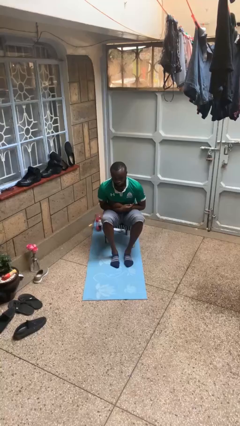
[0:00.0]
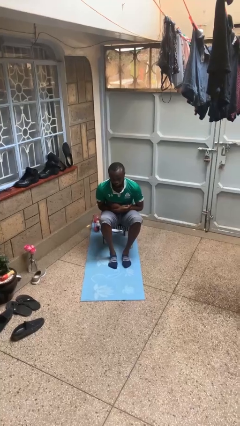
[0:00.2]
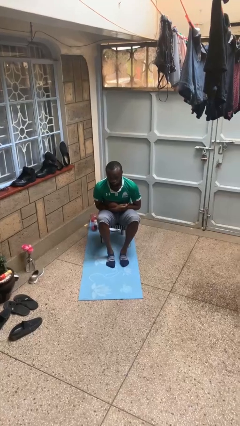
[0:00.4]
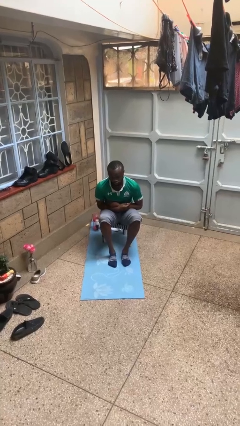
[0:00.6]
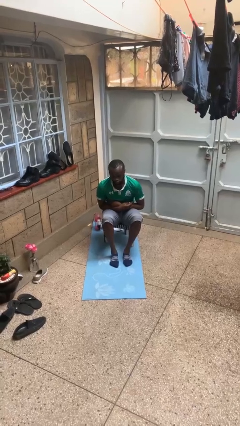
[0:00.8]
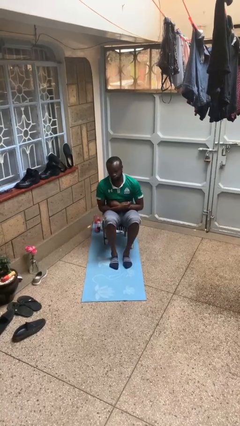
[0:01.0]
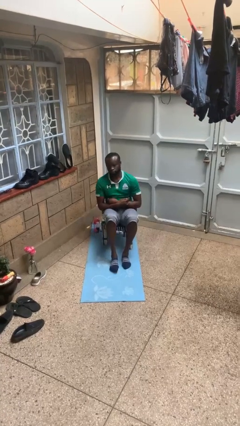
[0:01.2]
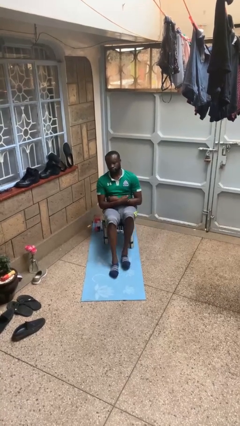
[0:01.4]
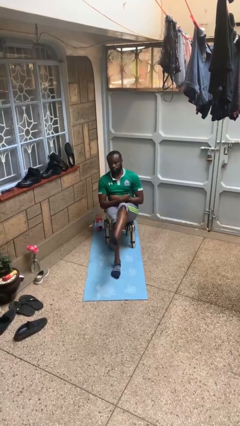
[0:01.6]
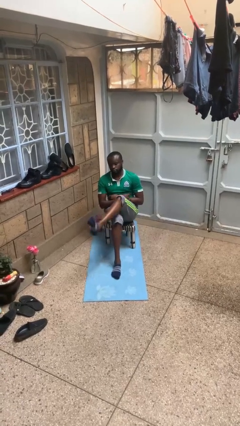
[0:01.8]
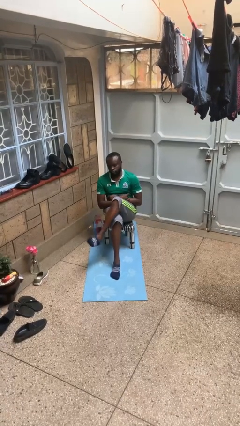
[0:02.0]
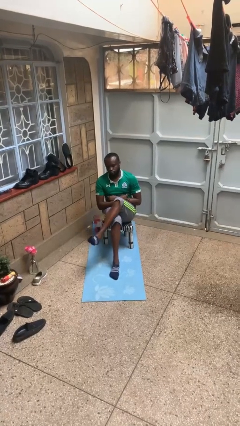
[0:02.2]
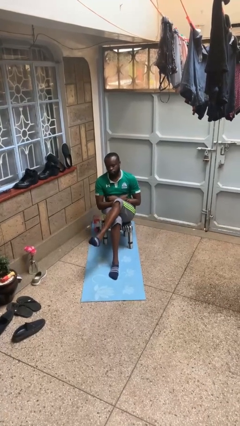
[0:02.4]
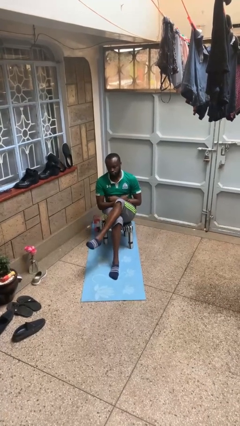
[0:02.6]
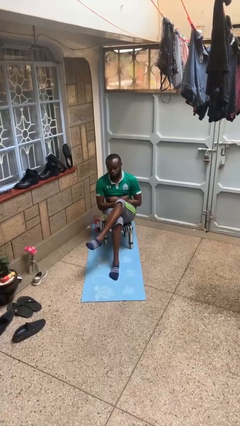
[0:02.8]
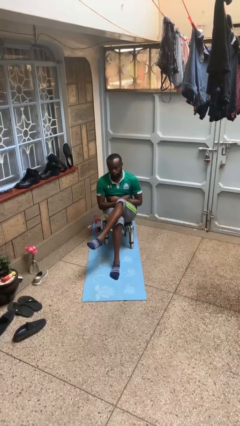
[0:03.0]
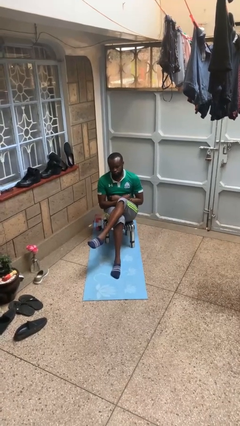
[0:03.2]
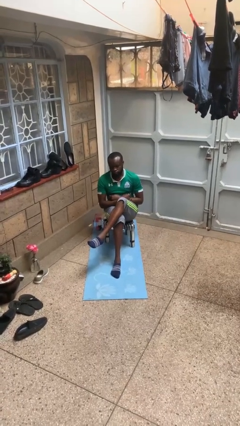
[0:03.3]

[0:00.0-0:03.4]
person crosses legs

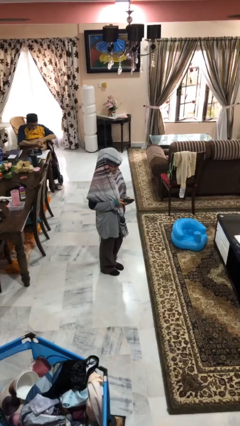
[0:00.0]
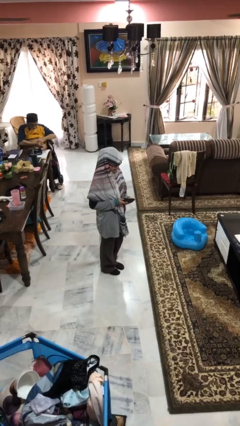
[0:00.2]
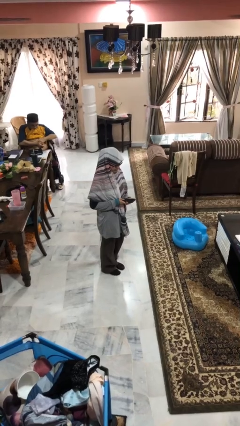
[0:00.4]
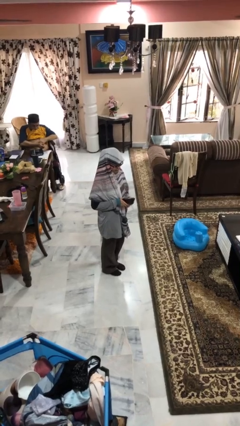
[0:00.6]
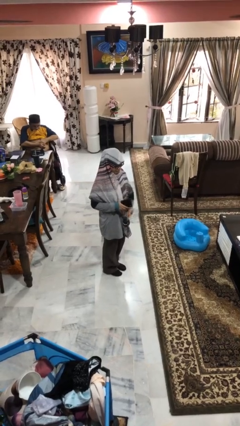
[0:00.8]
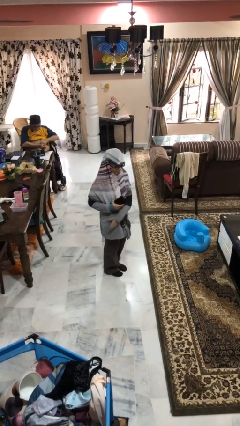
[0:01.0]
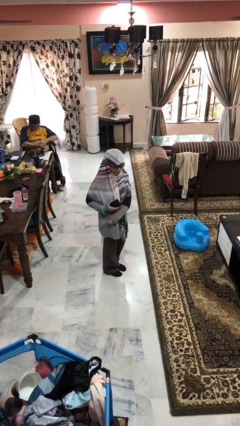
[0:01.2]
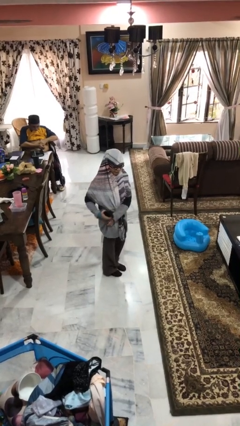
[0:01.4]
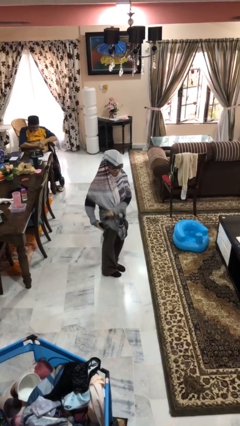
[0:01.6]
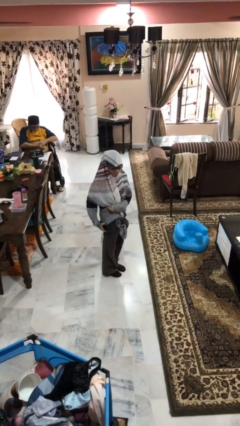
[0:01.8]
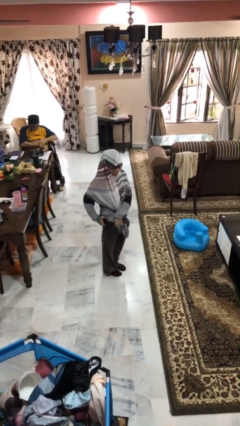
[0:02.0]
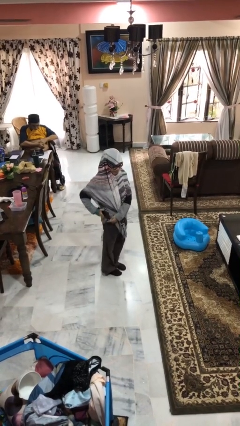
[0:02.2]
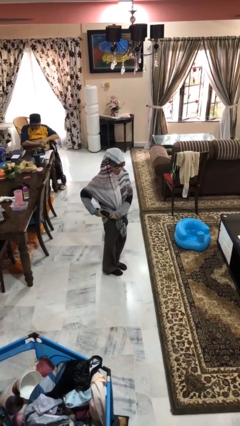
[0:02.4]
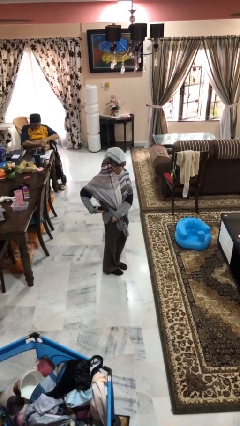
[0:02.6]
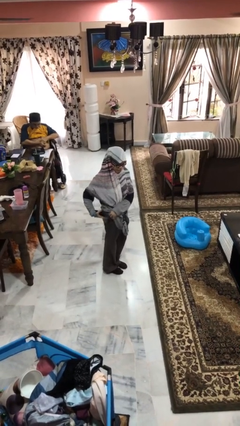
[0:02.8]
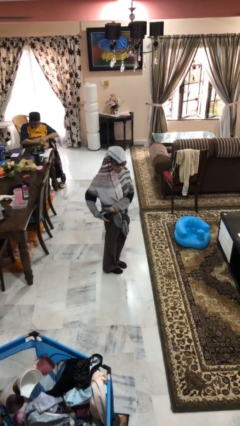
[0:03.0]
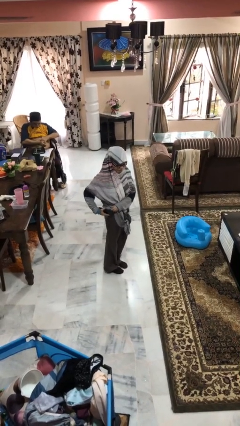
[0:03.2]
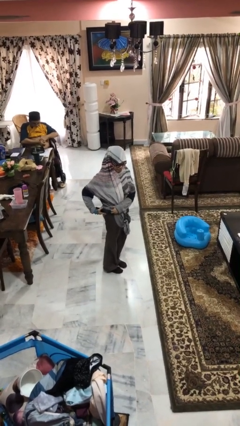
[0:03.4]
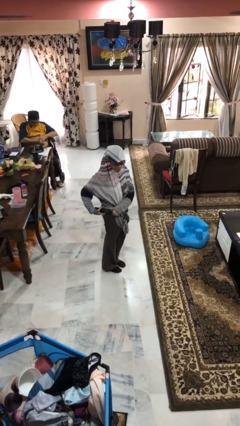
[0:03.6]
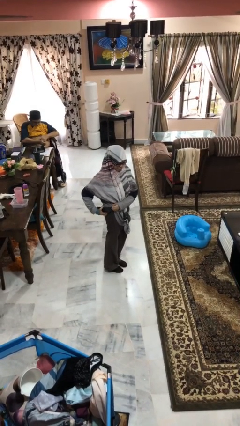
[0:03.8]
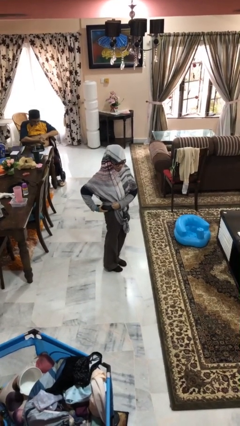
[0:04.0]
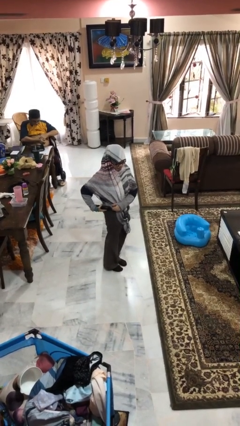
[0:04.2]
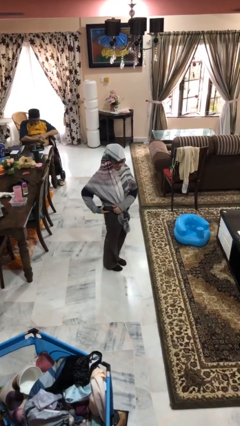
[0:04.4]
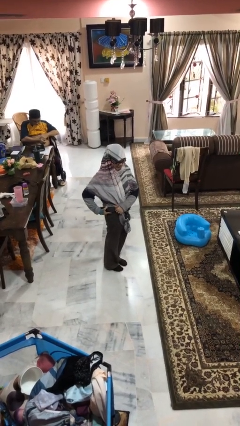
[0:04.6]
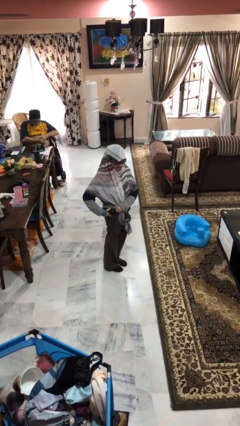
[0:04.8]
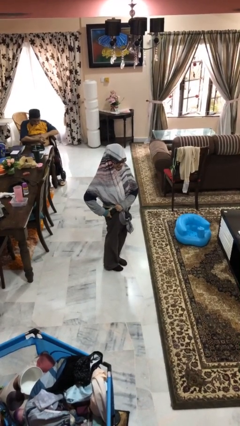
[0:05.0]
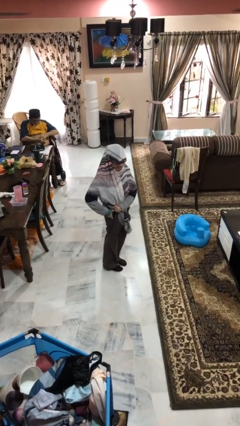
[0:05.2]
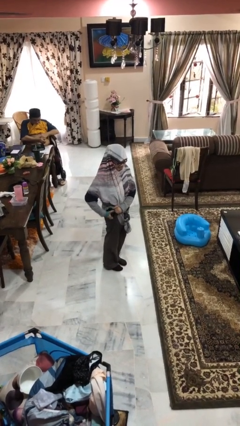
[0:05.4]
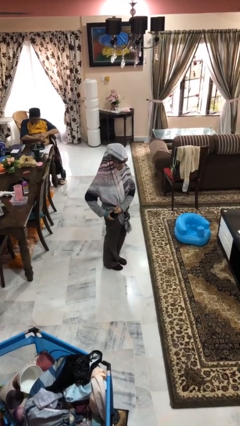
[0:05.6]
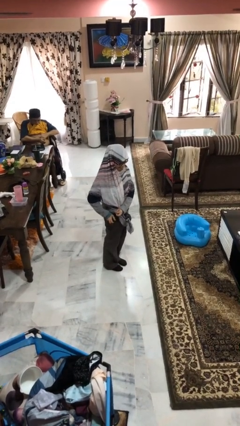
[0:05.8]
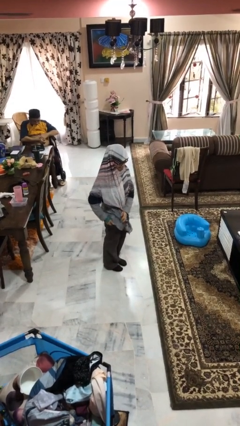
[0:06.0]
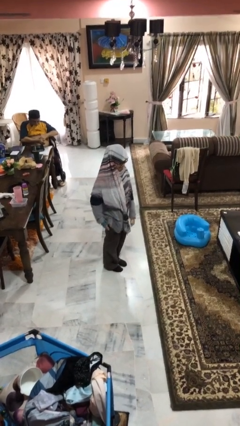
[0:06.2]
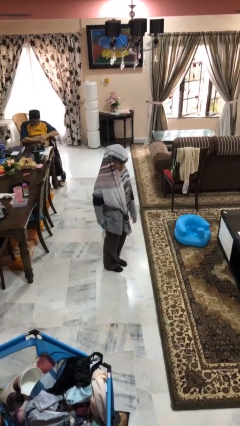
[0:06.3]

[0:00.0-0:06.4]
person puts phone into pocket

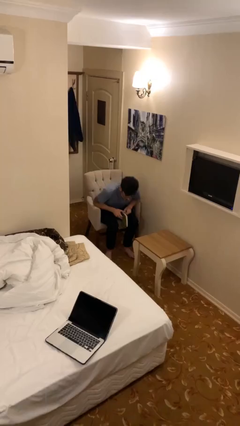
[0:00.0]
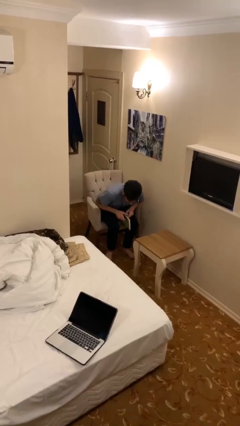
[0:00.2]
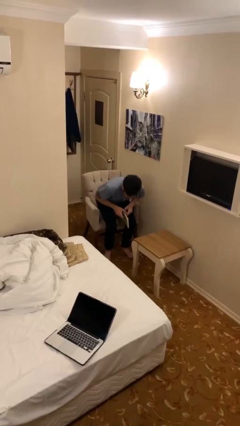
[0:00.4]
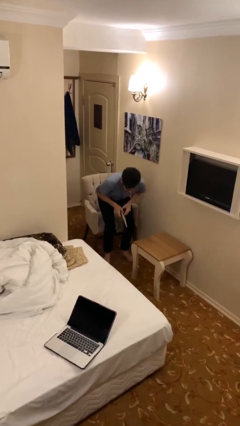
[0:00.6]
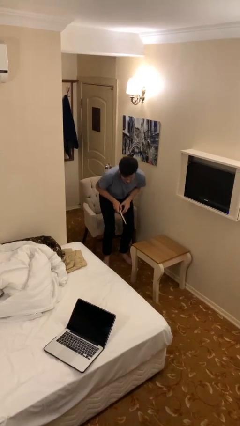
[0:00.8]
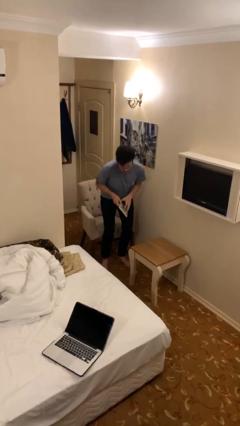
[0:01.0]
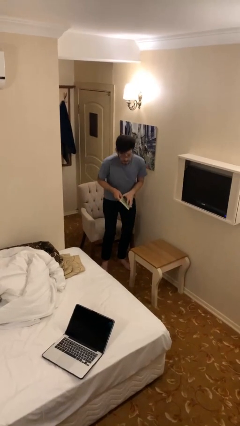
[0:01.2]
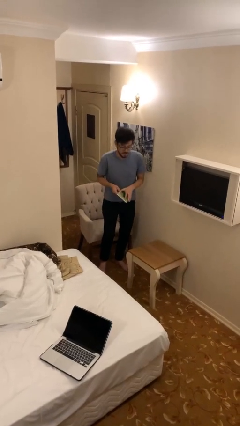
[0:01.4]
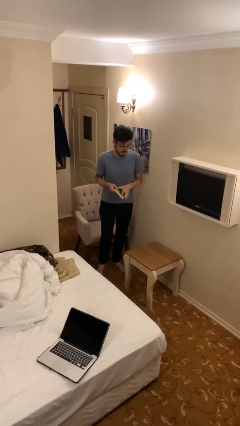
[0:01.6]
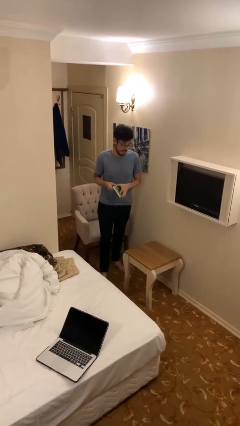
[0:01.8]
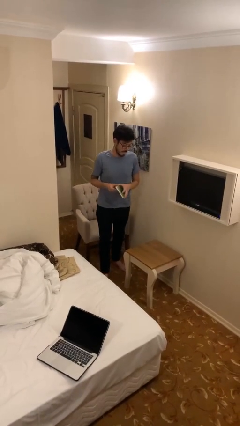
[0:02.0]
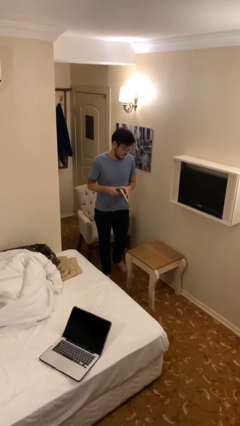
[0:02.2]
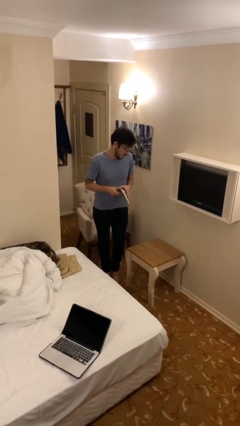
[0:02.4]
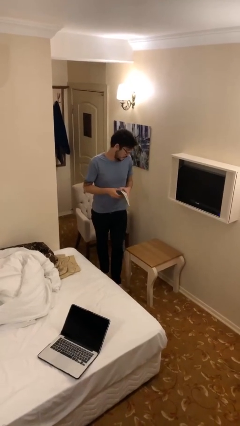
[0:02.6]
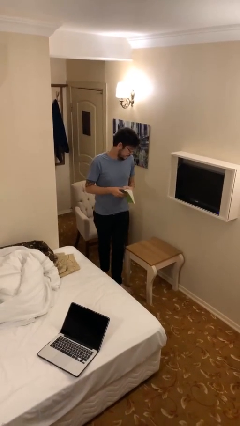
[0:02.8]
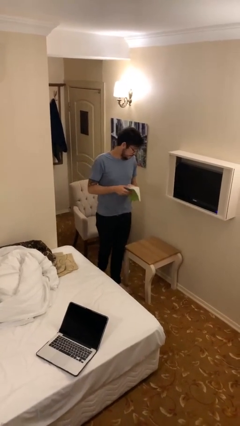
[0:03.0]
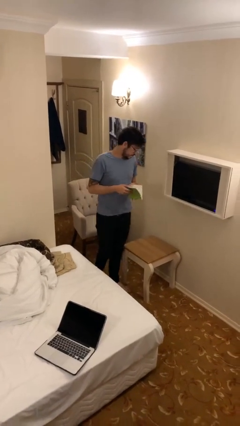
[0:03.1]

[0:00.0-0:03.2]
person stands up

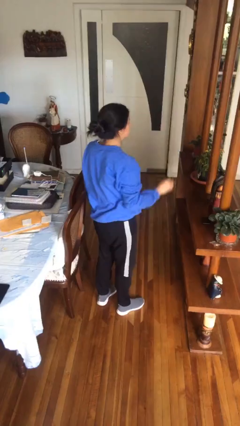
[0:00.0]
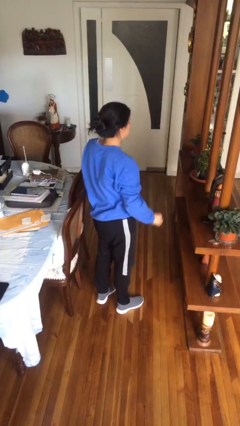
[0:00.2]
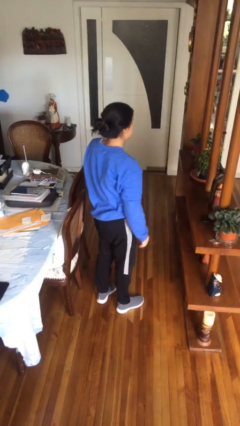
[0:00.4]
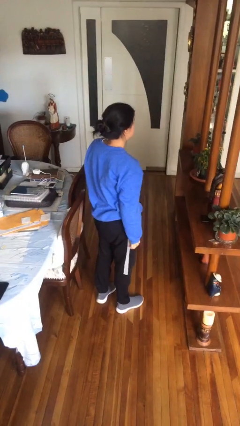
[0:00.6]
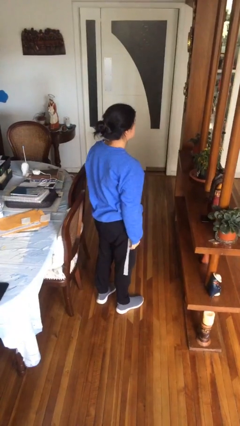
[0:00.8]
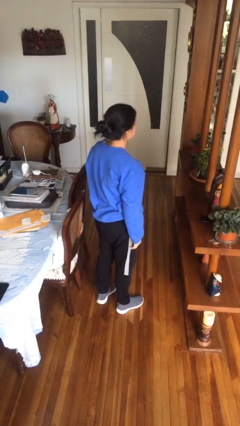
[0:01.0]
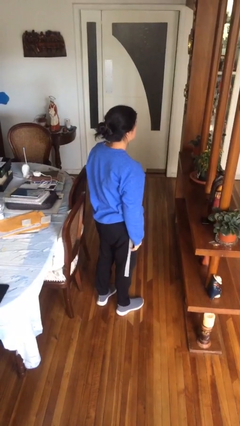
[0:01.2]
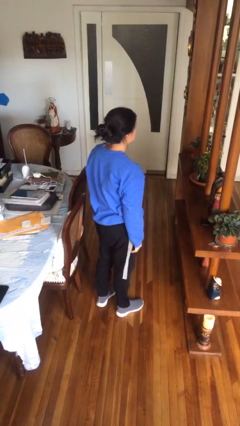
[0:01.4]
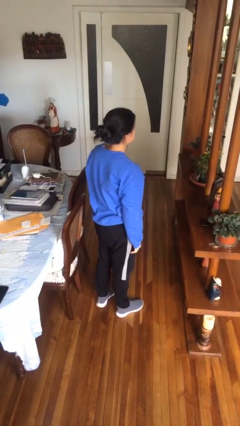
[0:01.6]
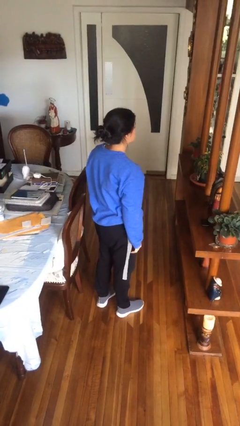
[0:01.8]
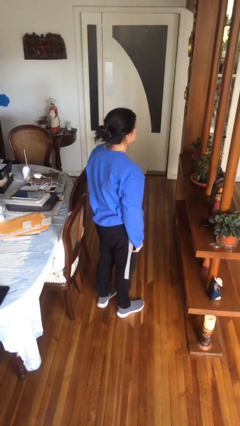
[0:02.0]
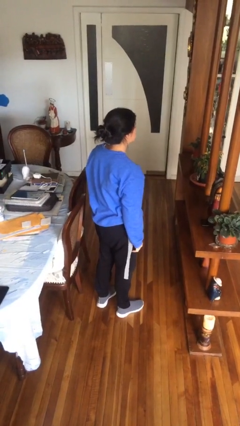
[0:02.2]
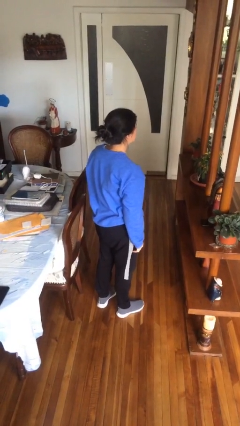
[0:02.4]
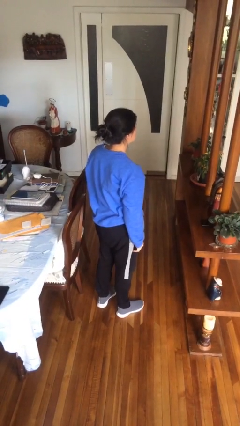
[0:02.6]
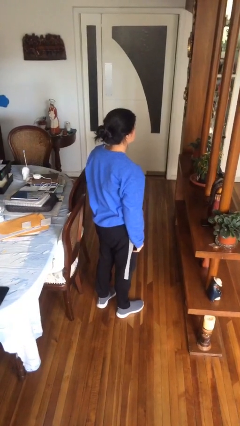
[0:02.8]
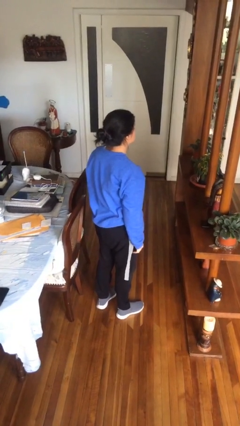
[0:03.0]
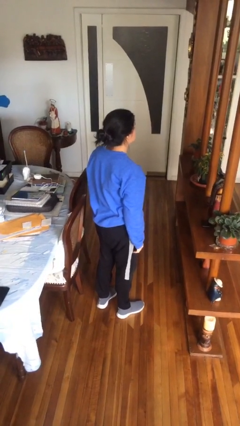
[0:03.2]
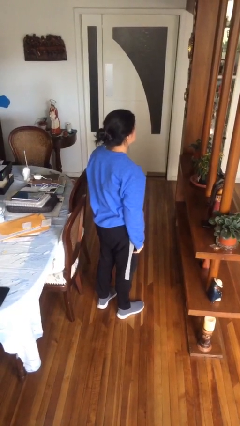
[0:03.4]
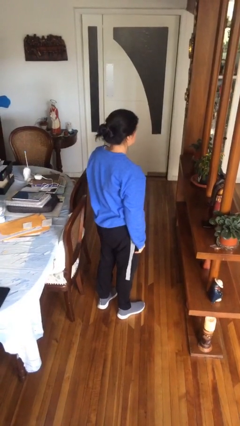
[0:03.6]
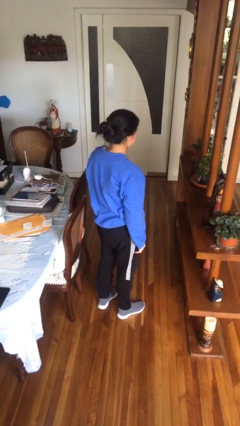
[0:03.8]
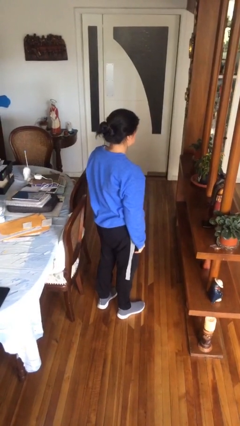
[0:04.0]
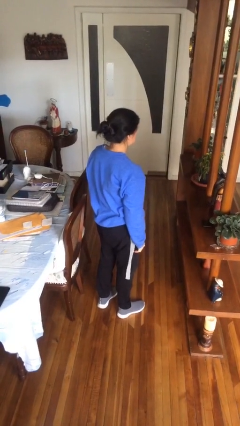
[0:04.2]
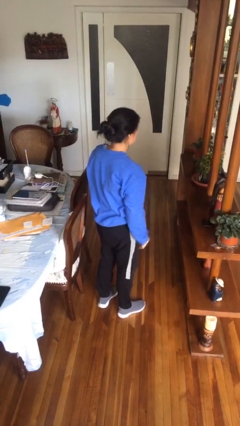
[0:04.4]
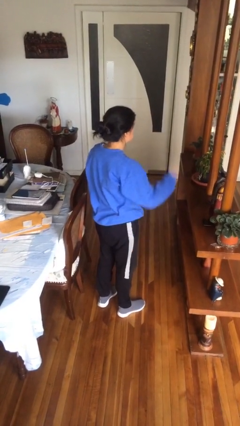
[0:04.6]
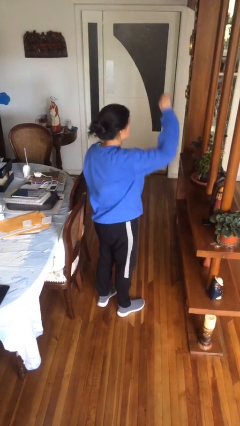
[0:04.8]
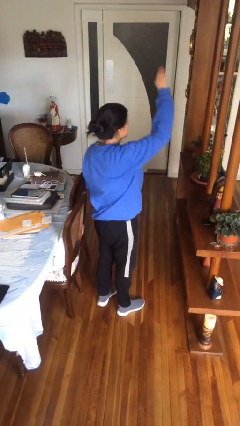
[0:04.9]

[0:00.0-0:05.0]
person gestures lower hand
